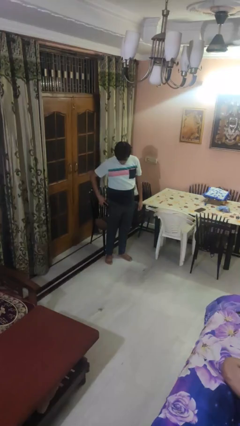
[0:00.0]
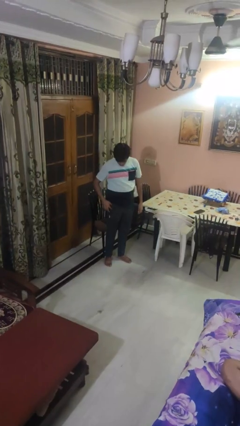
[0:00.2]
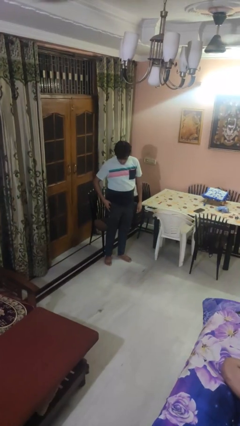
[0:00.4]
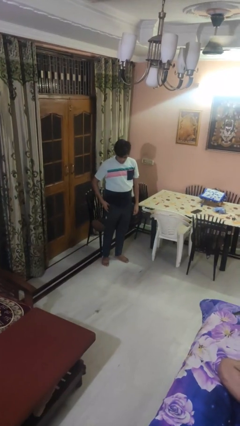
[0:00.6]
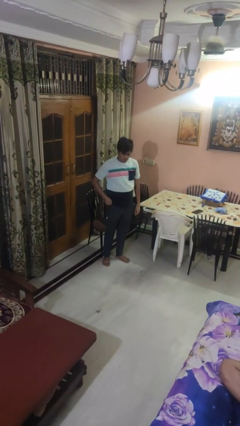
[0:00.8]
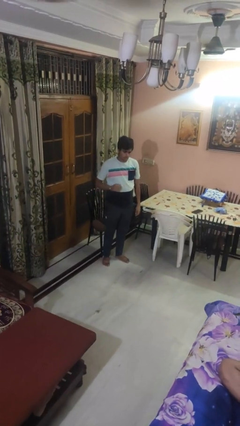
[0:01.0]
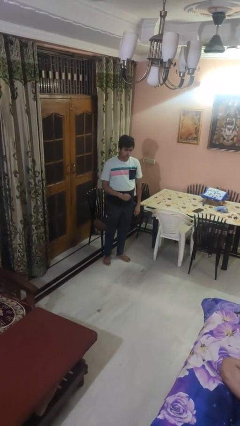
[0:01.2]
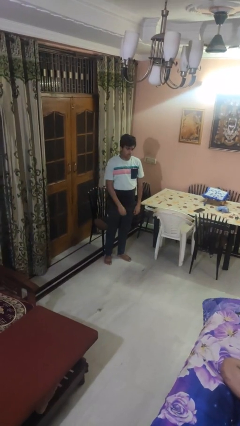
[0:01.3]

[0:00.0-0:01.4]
person puts phone into pocket

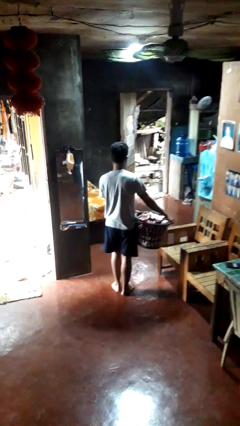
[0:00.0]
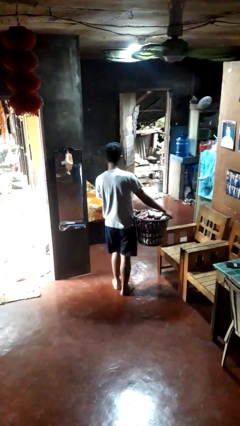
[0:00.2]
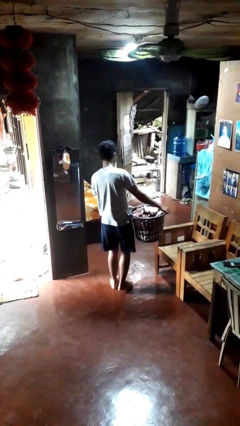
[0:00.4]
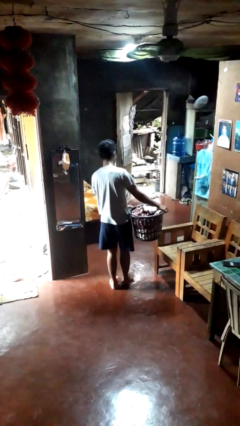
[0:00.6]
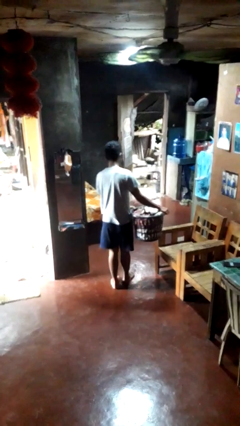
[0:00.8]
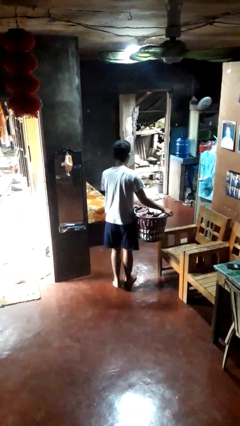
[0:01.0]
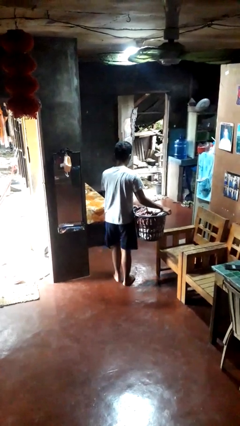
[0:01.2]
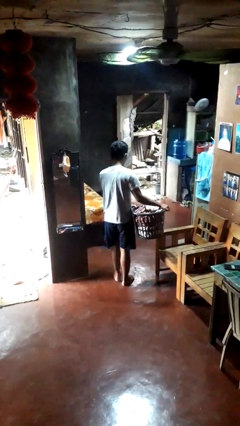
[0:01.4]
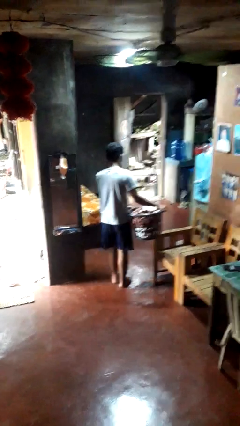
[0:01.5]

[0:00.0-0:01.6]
person carries laundry basket

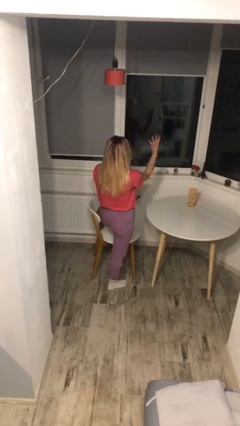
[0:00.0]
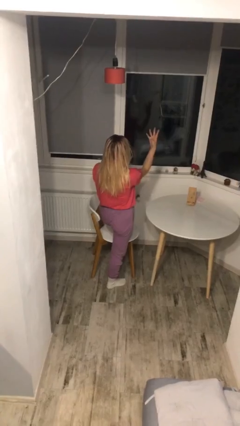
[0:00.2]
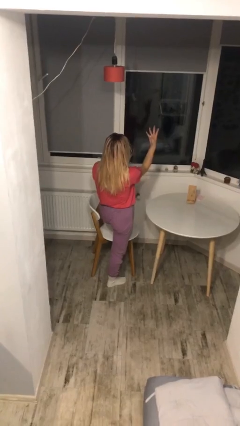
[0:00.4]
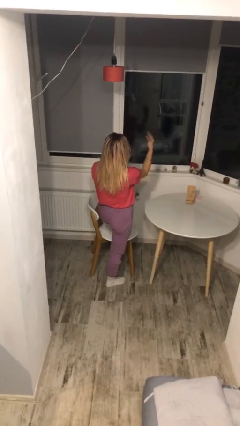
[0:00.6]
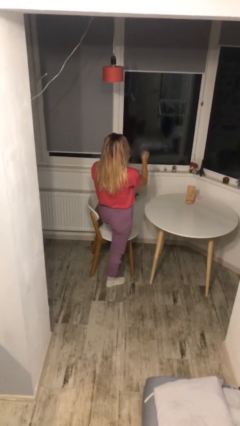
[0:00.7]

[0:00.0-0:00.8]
person gestures number four

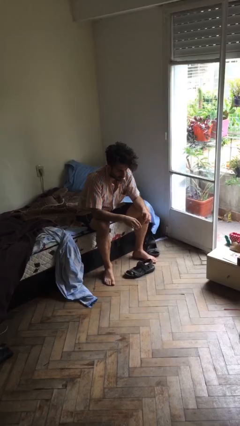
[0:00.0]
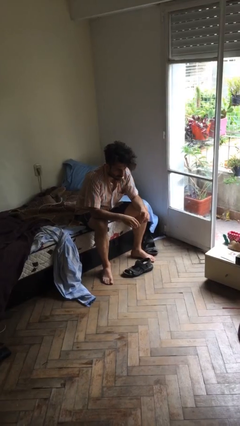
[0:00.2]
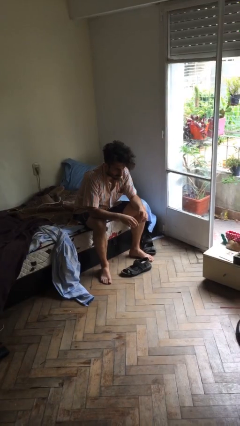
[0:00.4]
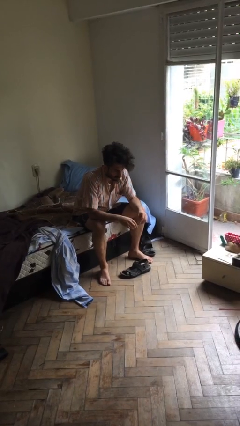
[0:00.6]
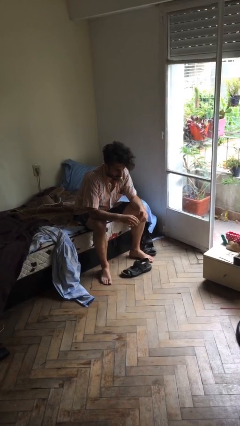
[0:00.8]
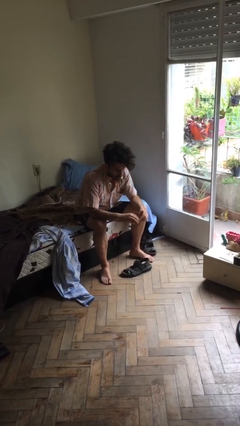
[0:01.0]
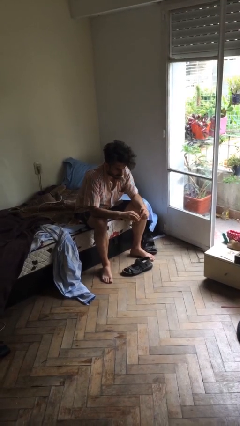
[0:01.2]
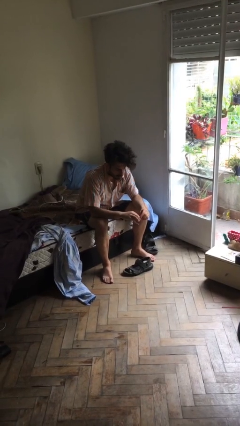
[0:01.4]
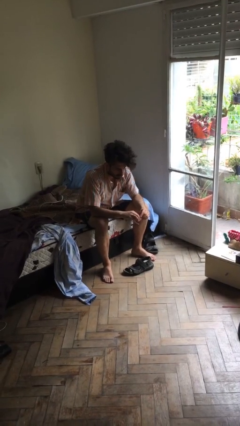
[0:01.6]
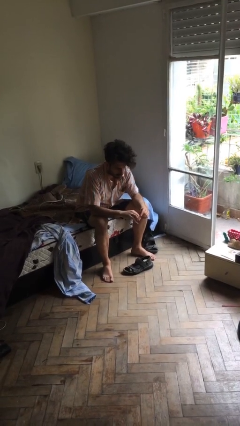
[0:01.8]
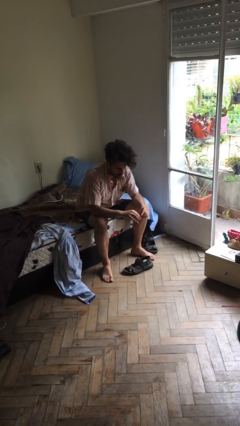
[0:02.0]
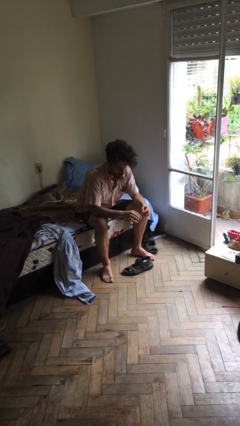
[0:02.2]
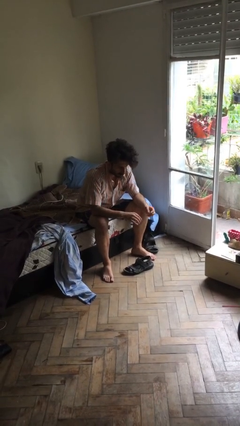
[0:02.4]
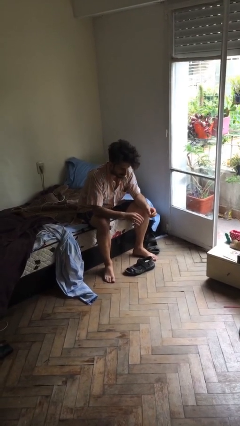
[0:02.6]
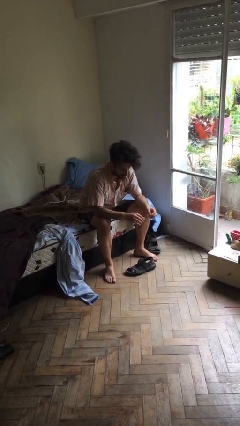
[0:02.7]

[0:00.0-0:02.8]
person clips fingernails

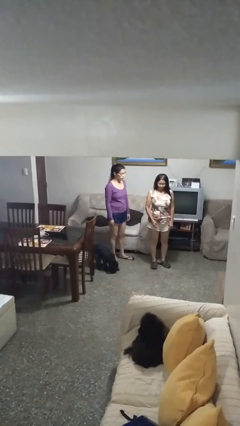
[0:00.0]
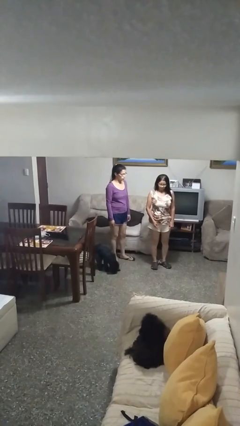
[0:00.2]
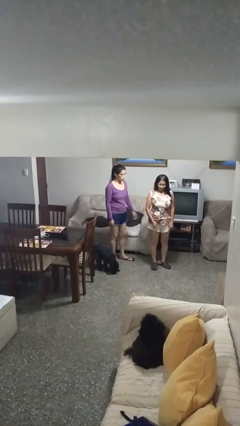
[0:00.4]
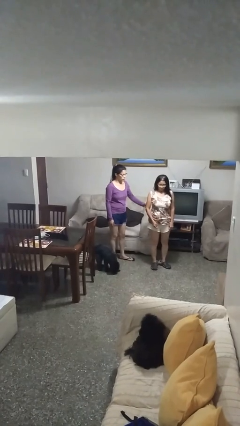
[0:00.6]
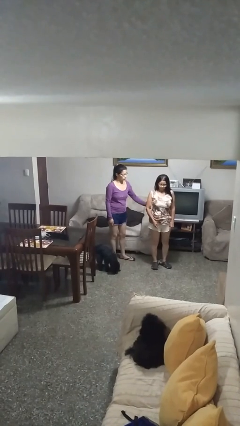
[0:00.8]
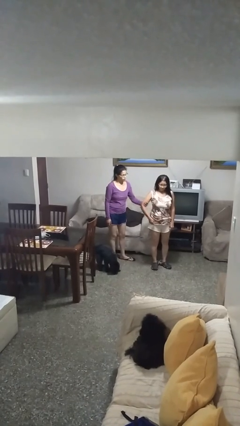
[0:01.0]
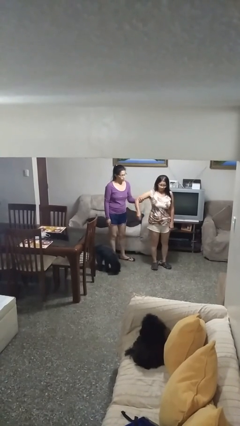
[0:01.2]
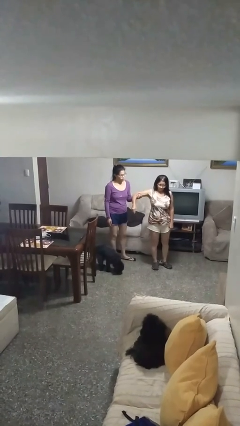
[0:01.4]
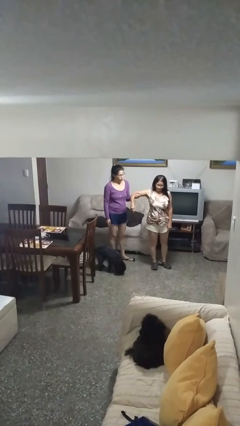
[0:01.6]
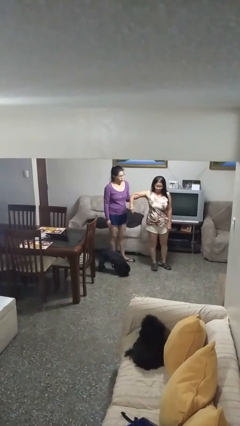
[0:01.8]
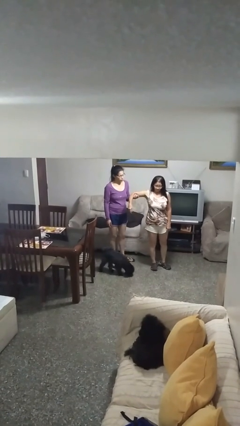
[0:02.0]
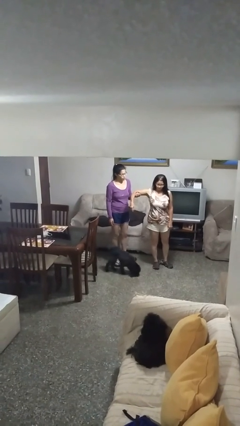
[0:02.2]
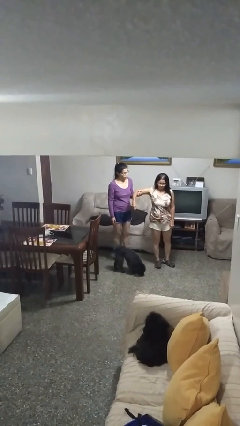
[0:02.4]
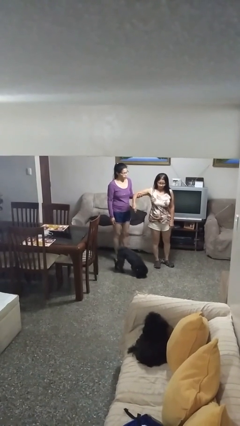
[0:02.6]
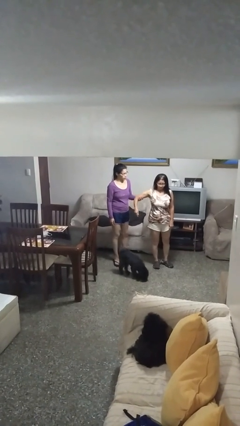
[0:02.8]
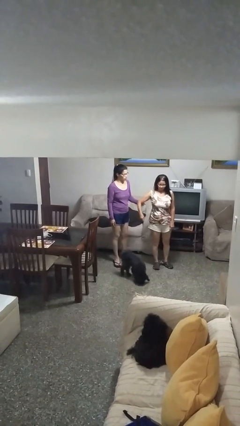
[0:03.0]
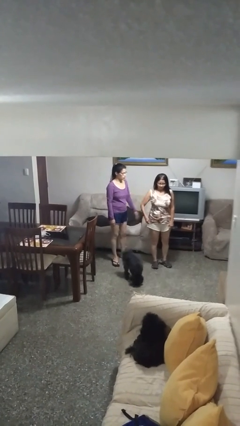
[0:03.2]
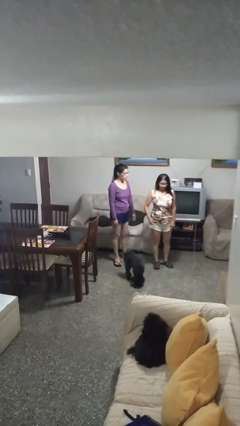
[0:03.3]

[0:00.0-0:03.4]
person grabs person by bicep

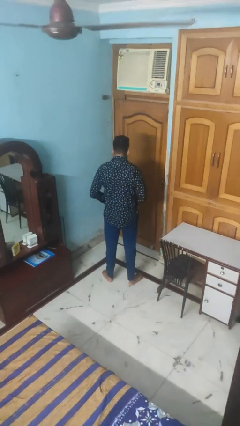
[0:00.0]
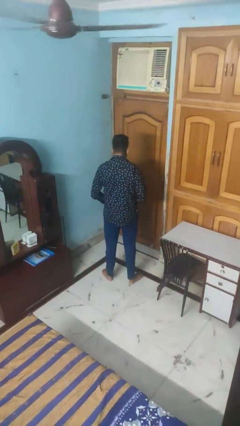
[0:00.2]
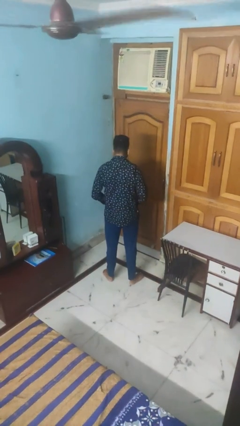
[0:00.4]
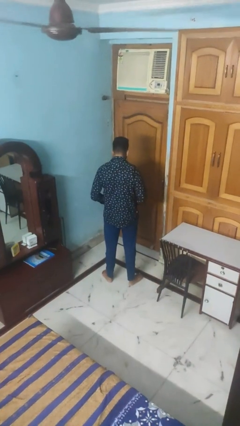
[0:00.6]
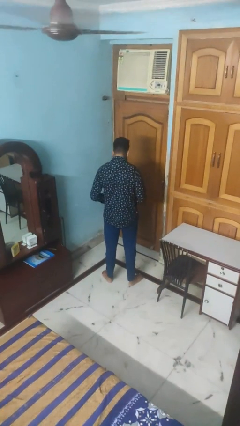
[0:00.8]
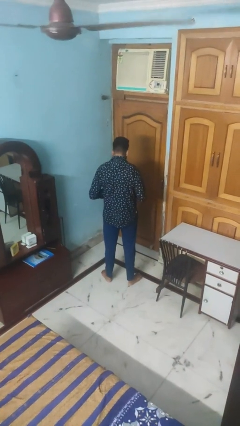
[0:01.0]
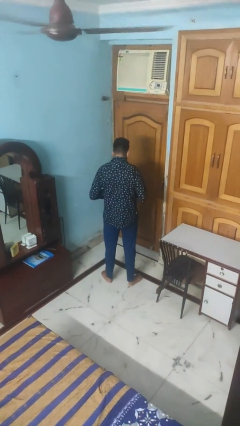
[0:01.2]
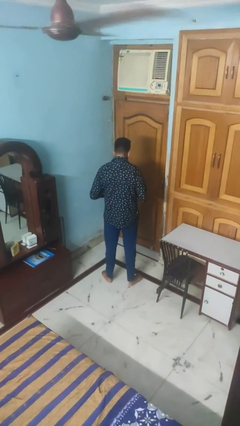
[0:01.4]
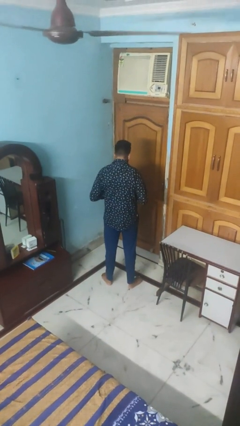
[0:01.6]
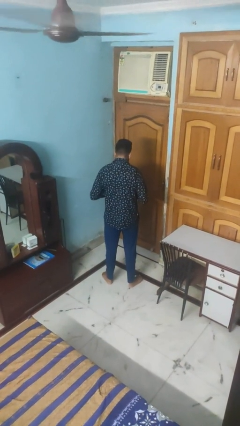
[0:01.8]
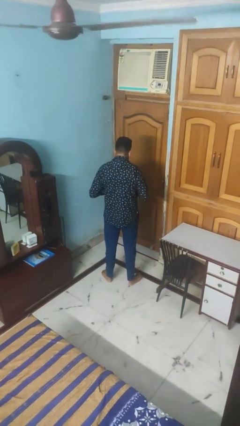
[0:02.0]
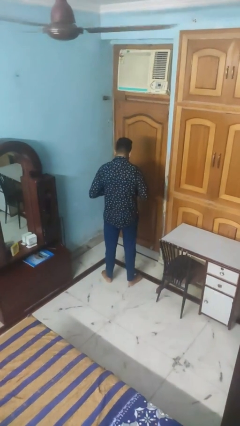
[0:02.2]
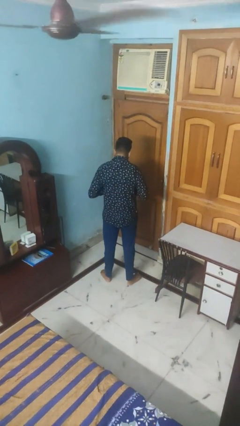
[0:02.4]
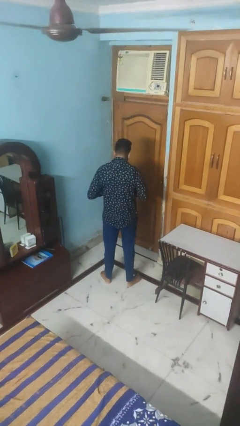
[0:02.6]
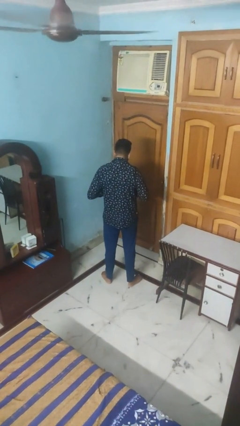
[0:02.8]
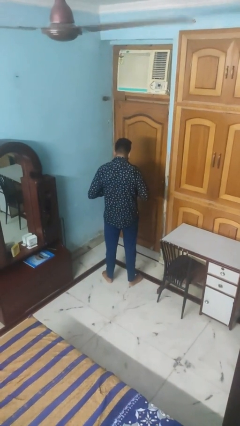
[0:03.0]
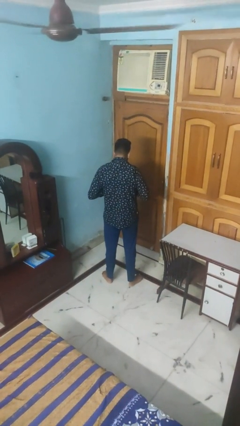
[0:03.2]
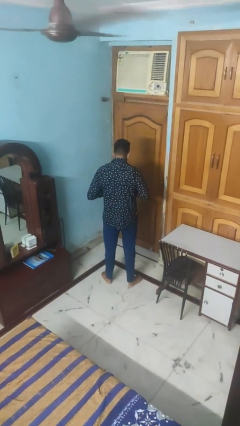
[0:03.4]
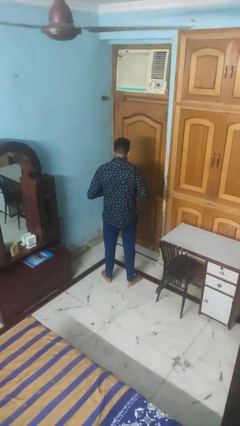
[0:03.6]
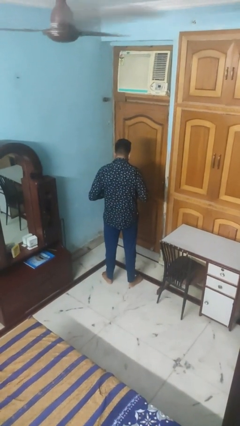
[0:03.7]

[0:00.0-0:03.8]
person buttons shirt

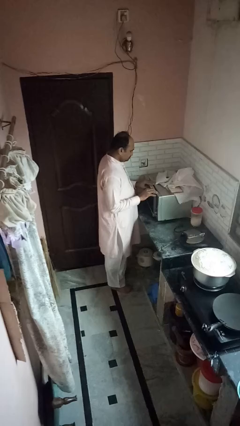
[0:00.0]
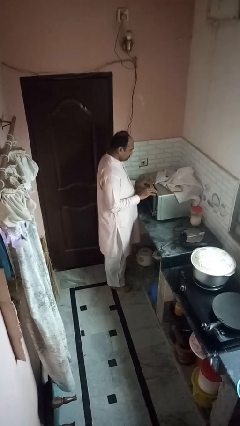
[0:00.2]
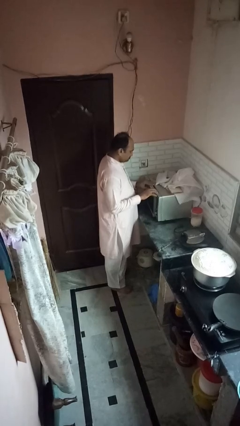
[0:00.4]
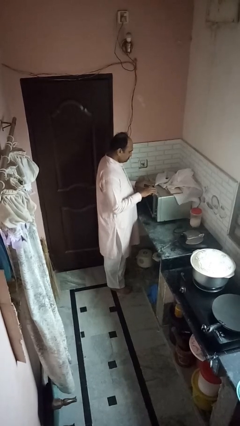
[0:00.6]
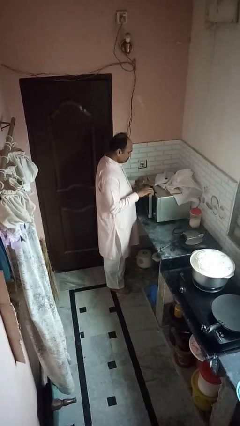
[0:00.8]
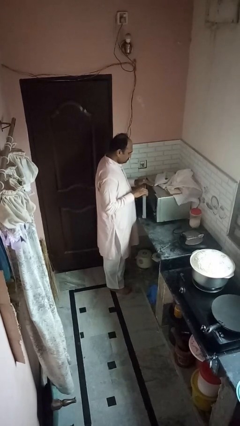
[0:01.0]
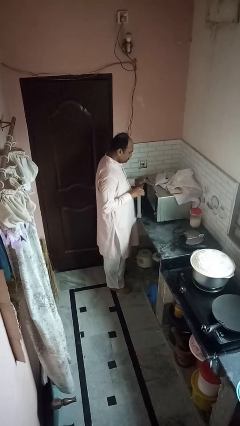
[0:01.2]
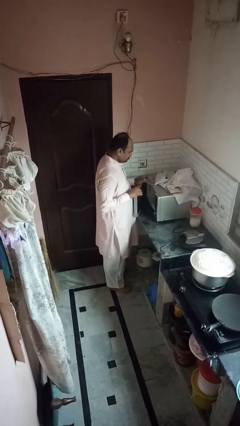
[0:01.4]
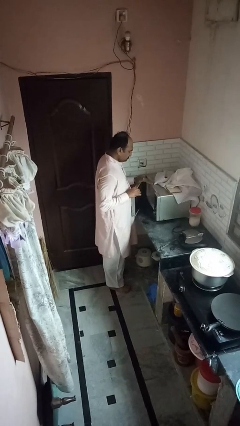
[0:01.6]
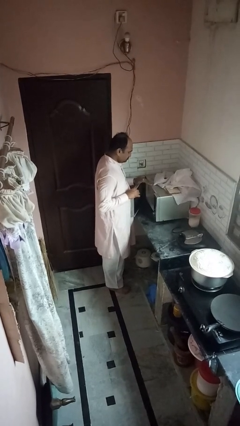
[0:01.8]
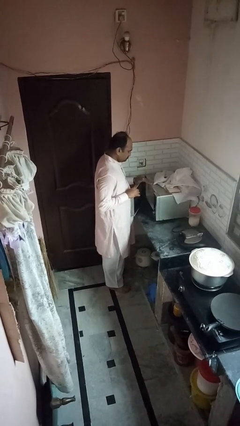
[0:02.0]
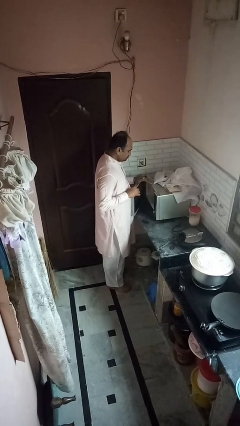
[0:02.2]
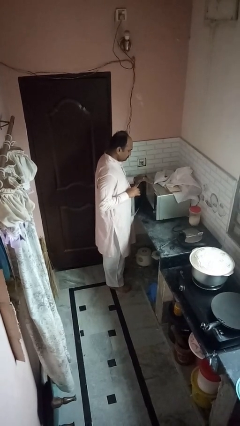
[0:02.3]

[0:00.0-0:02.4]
person opens oven door

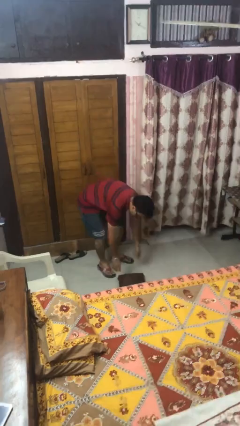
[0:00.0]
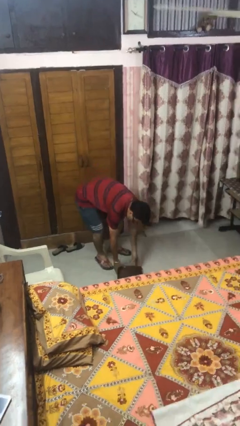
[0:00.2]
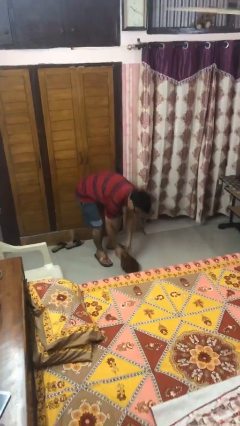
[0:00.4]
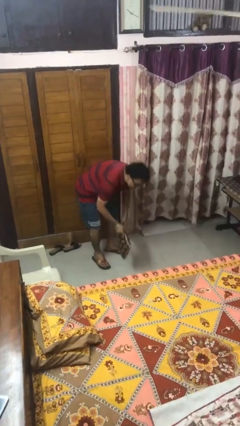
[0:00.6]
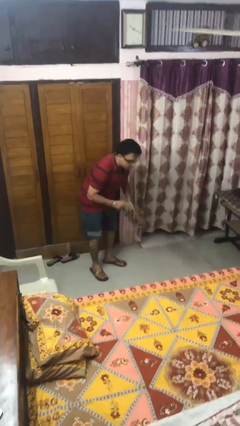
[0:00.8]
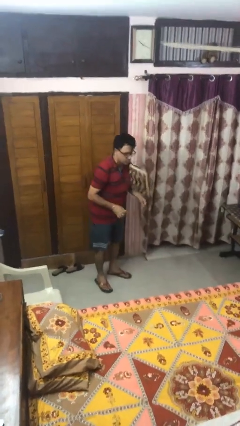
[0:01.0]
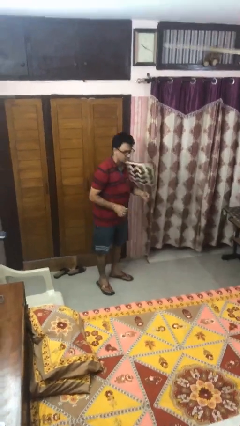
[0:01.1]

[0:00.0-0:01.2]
person picks up object from floor
